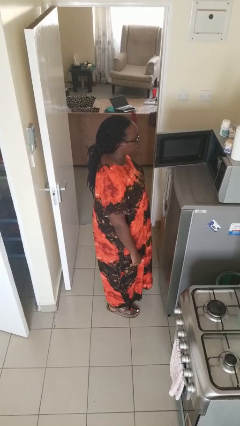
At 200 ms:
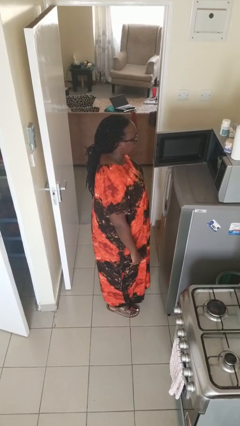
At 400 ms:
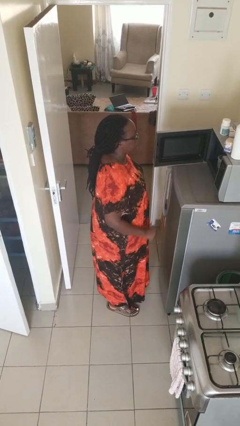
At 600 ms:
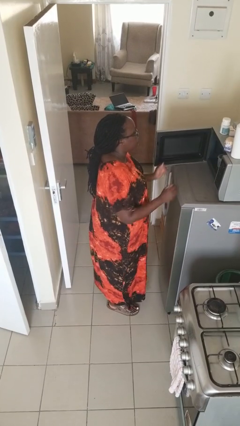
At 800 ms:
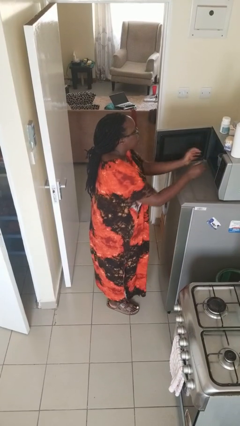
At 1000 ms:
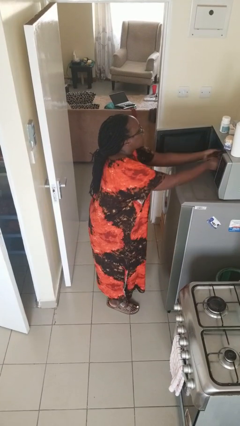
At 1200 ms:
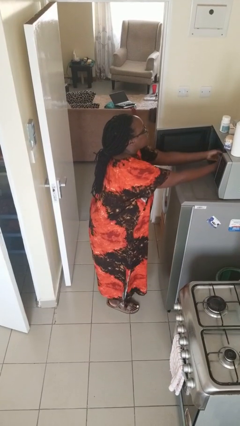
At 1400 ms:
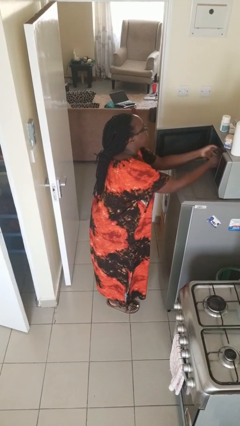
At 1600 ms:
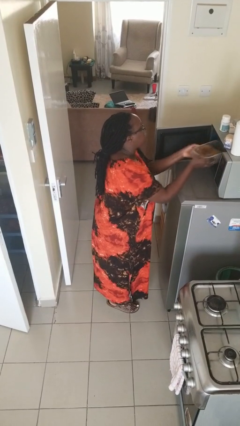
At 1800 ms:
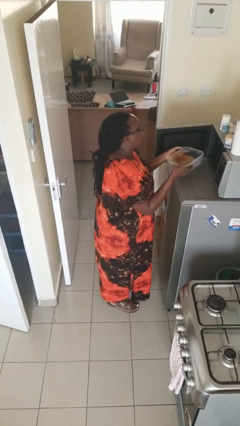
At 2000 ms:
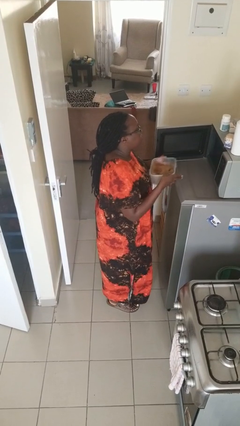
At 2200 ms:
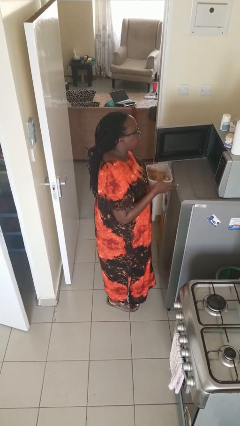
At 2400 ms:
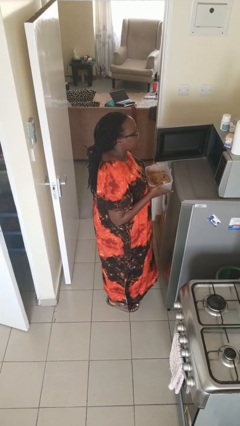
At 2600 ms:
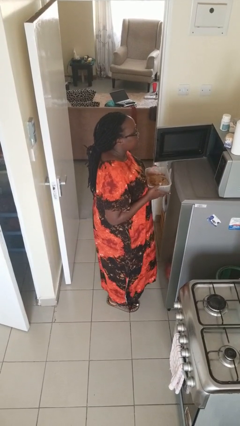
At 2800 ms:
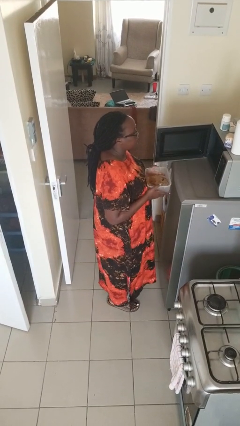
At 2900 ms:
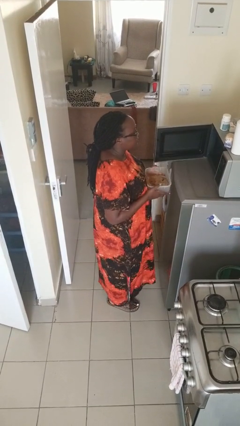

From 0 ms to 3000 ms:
person takes object from microwave

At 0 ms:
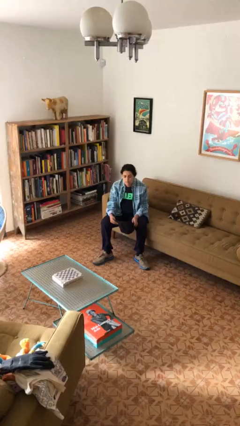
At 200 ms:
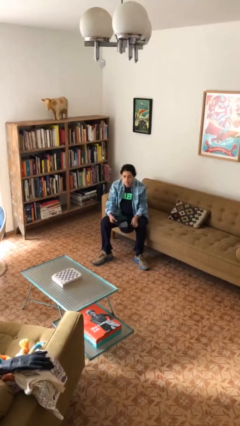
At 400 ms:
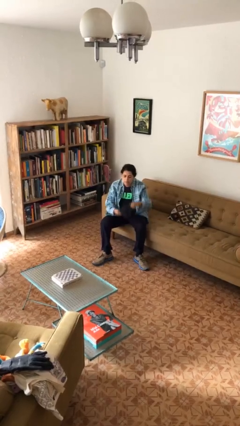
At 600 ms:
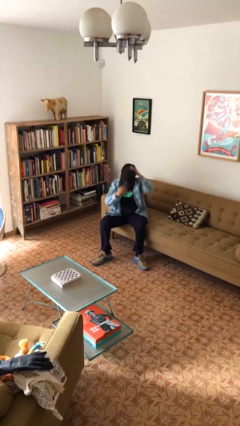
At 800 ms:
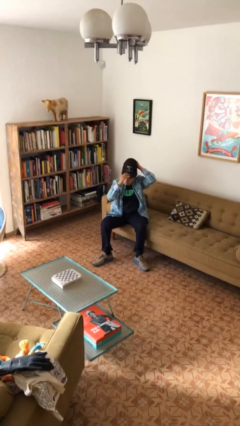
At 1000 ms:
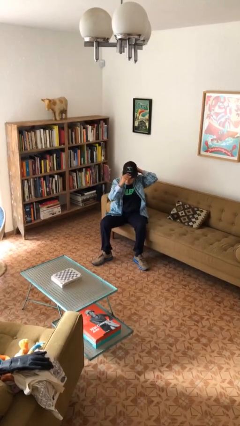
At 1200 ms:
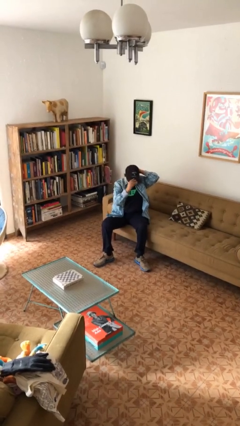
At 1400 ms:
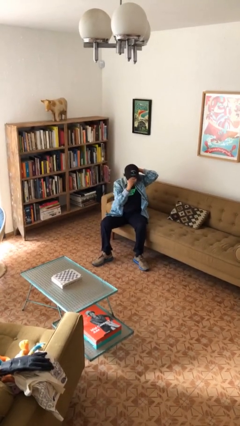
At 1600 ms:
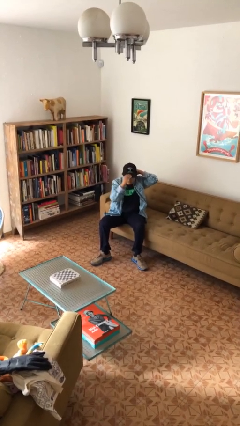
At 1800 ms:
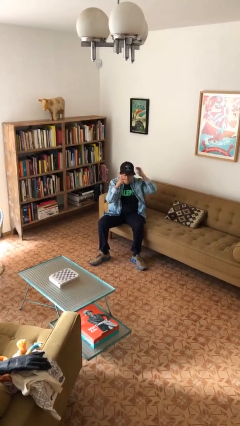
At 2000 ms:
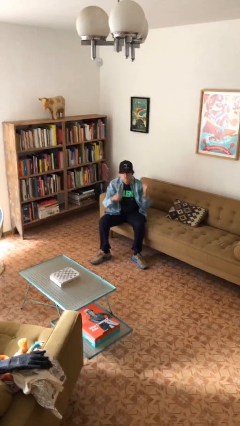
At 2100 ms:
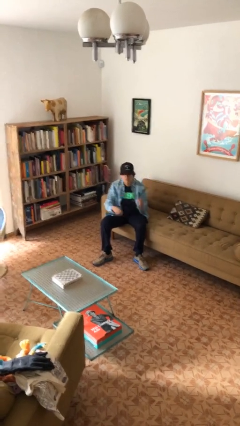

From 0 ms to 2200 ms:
person puts on hat

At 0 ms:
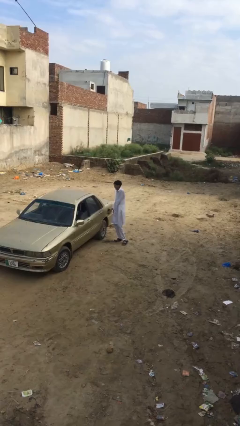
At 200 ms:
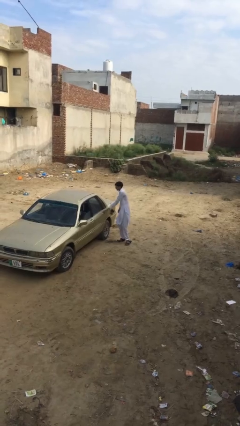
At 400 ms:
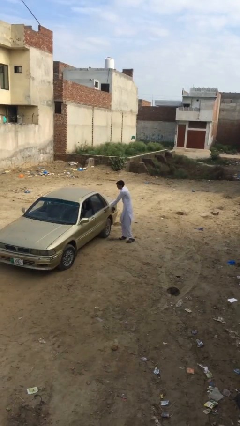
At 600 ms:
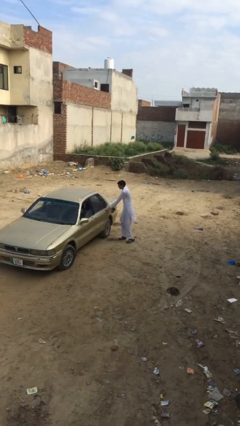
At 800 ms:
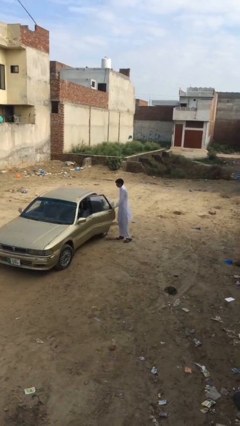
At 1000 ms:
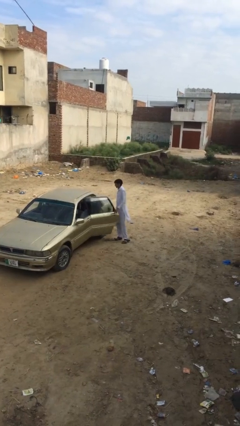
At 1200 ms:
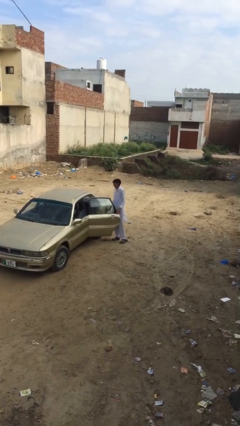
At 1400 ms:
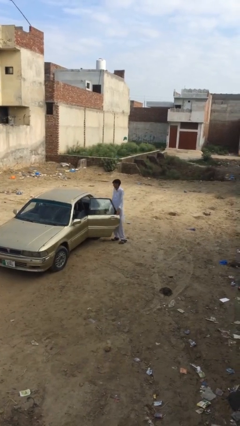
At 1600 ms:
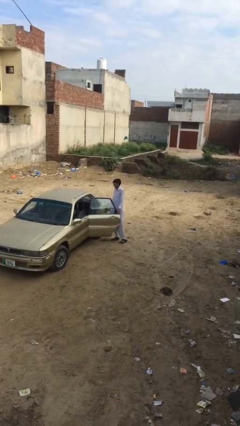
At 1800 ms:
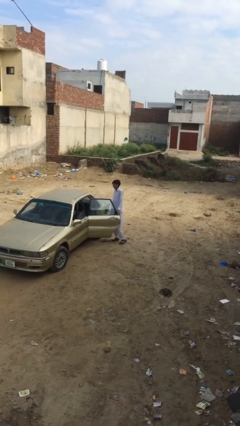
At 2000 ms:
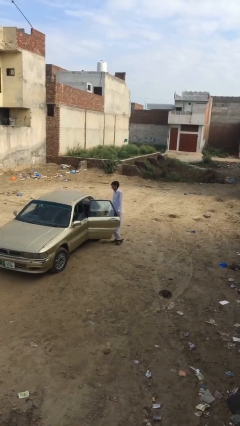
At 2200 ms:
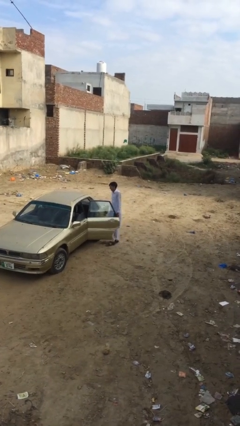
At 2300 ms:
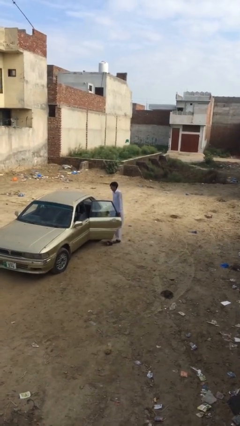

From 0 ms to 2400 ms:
person opens car door

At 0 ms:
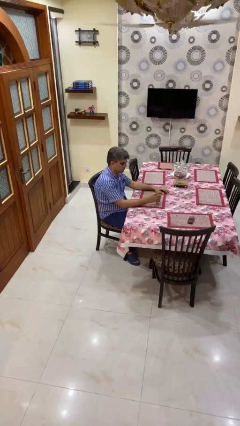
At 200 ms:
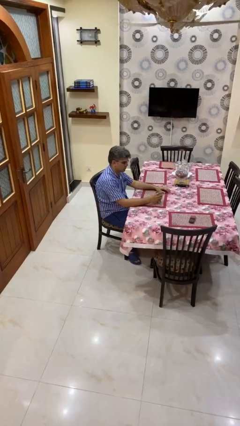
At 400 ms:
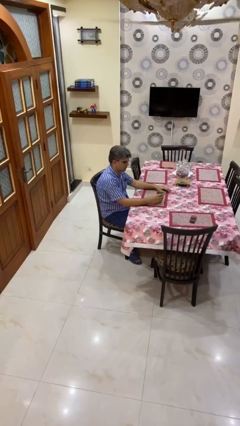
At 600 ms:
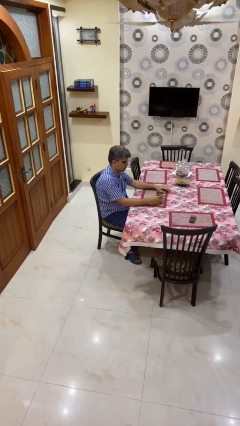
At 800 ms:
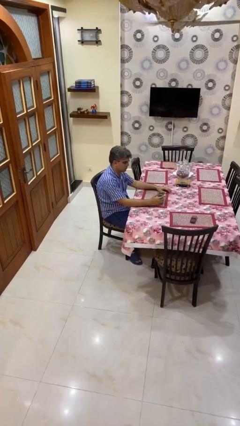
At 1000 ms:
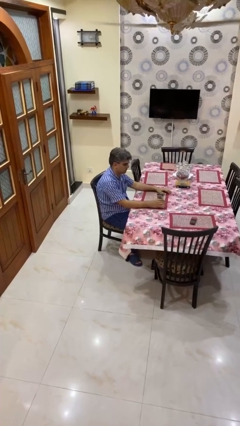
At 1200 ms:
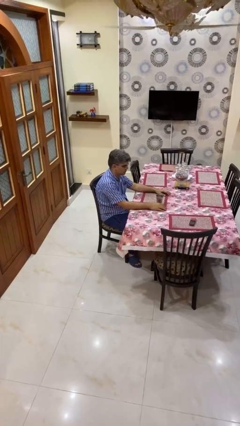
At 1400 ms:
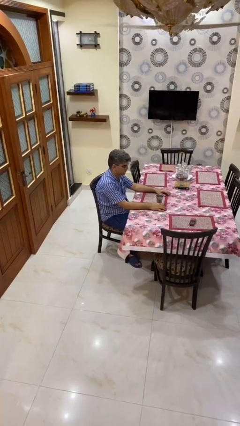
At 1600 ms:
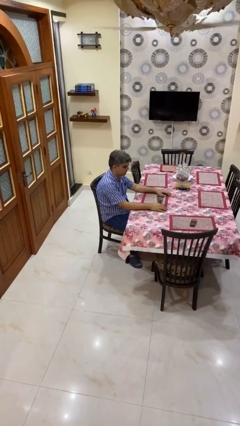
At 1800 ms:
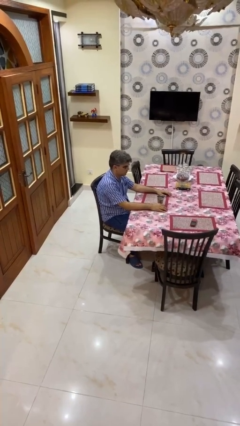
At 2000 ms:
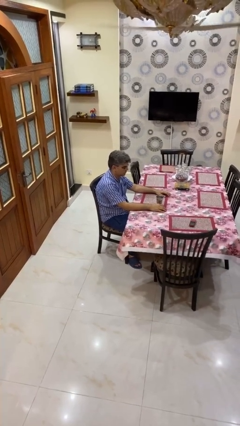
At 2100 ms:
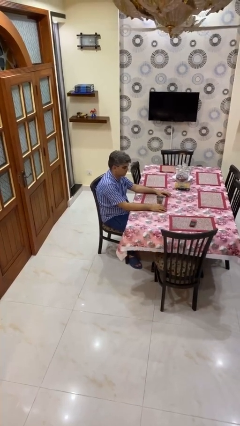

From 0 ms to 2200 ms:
person sets upright glass

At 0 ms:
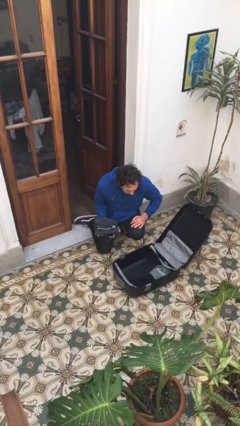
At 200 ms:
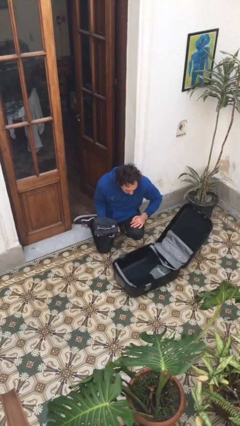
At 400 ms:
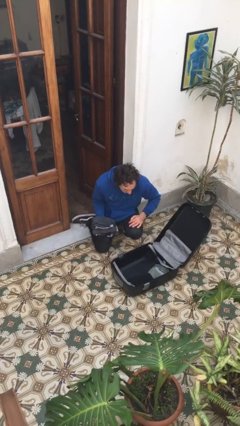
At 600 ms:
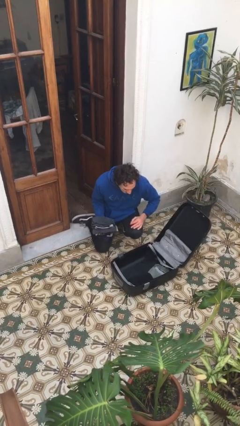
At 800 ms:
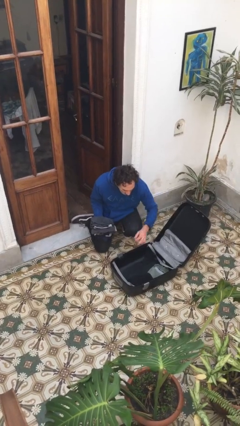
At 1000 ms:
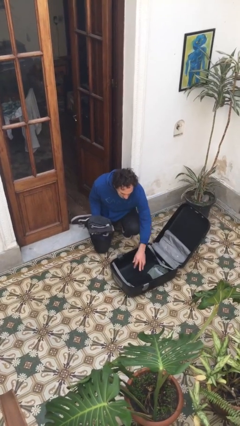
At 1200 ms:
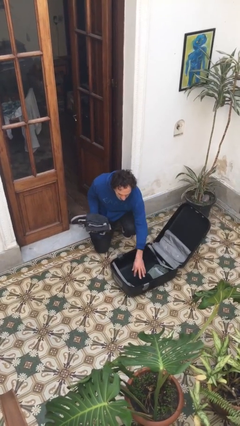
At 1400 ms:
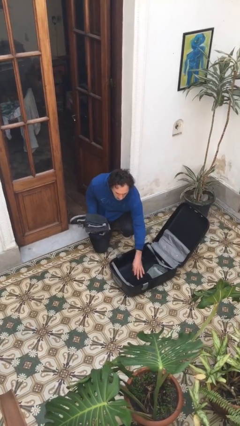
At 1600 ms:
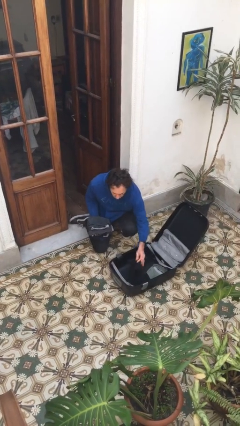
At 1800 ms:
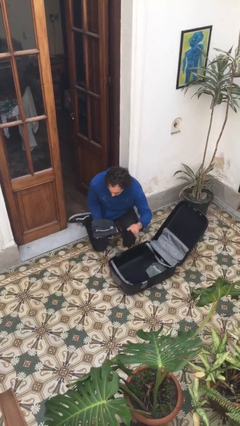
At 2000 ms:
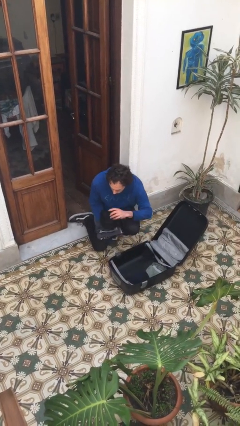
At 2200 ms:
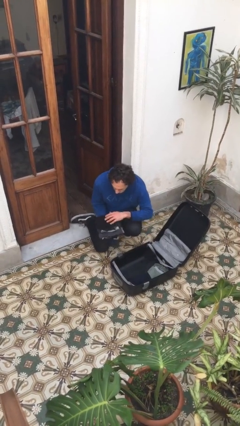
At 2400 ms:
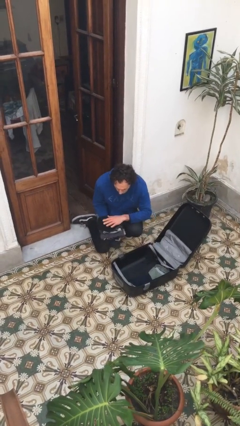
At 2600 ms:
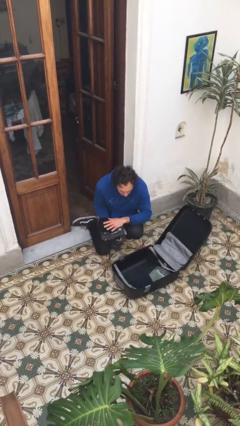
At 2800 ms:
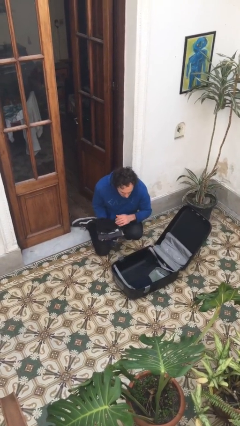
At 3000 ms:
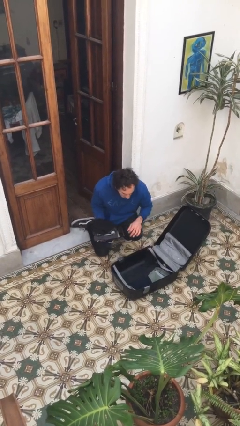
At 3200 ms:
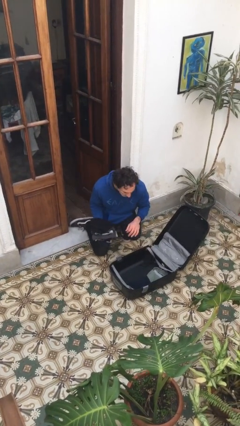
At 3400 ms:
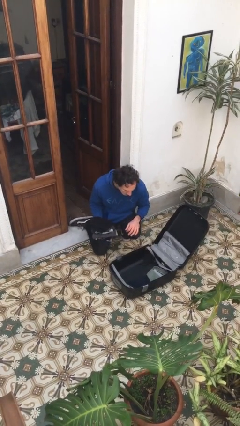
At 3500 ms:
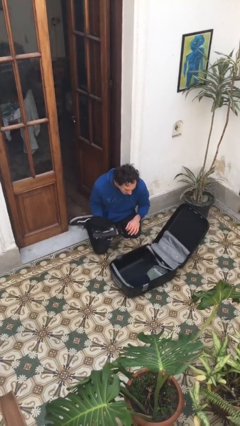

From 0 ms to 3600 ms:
person unloads clothes from suitcase

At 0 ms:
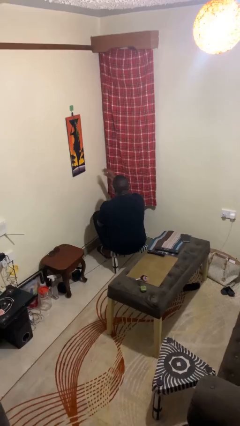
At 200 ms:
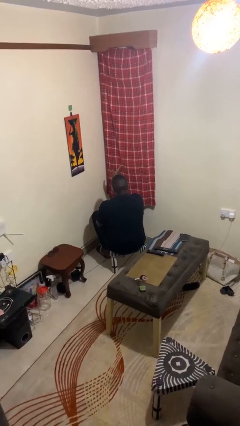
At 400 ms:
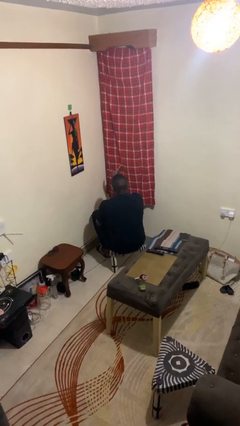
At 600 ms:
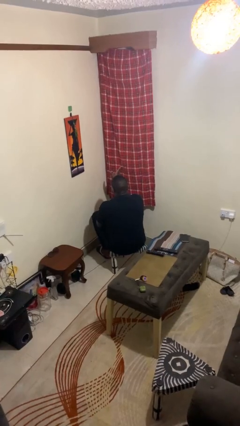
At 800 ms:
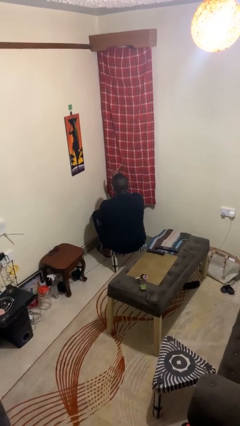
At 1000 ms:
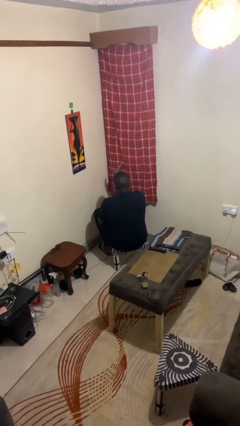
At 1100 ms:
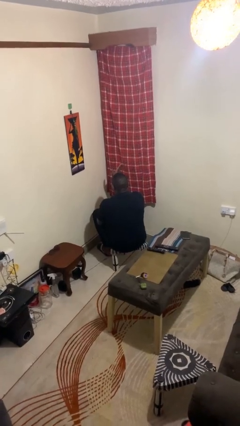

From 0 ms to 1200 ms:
person gestures swipe right

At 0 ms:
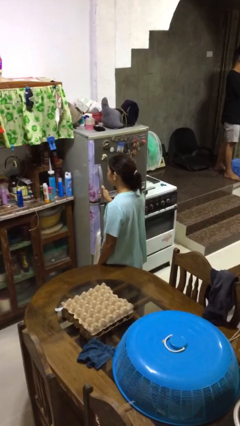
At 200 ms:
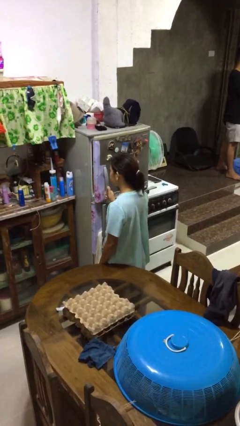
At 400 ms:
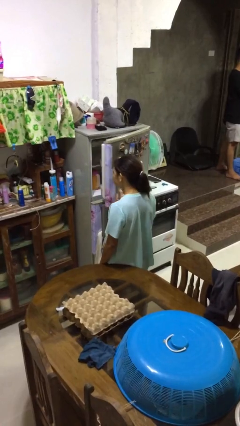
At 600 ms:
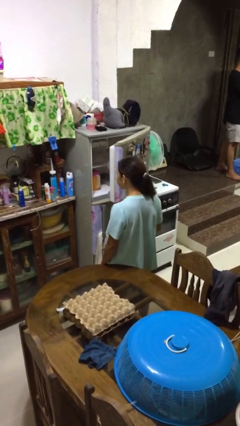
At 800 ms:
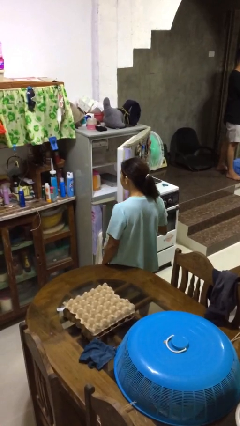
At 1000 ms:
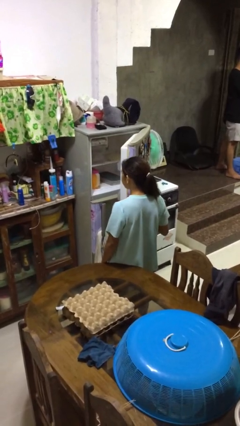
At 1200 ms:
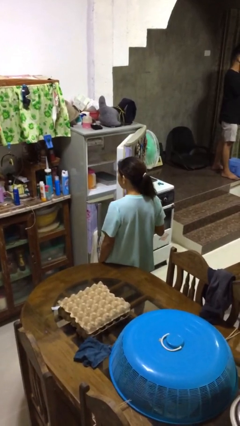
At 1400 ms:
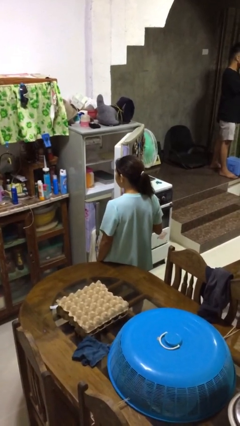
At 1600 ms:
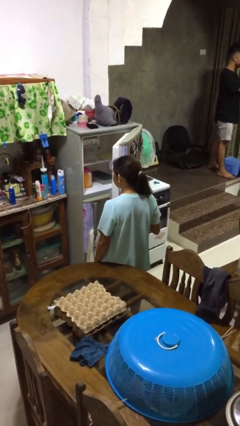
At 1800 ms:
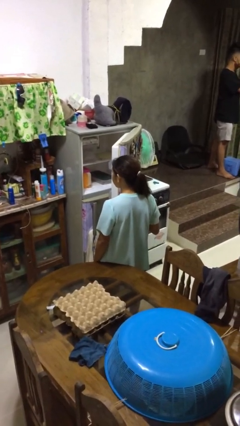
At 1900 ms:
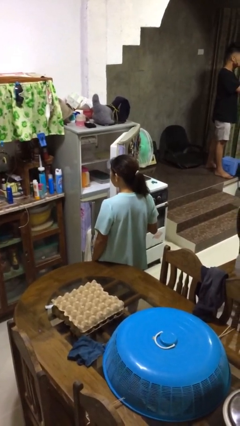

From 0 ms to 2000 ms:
person opens refrigerator

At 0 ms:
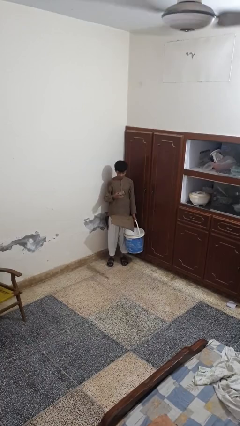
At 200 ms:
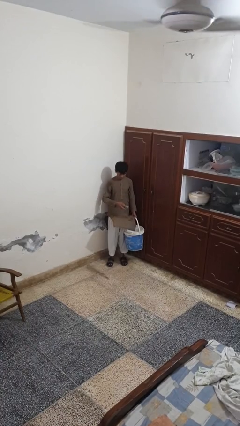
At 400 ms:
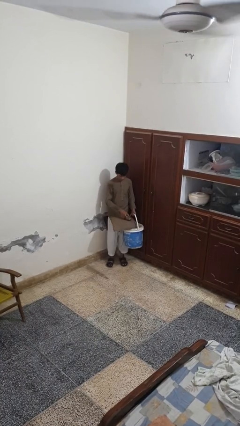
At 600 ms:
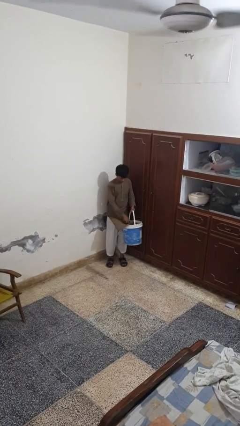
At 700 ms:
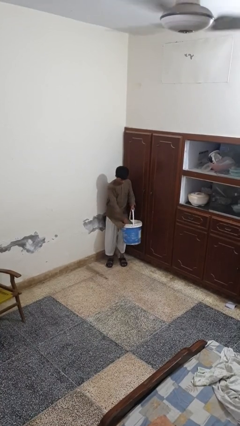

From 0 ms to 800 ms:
person puts object into basket
